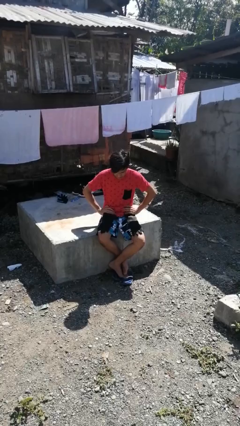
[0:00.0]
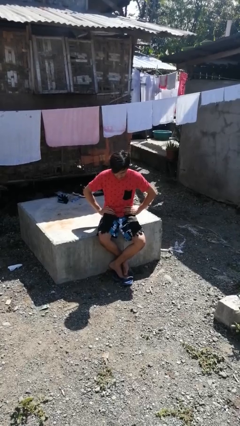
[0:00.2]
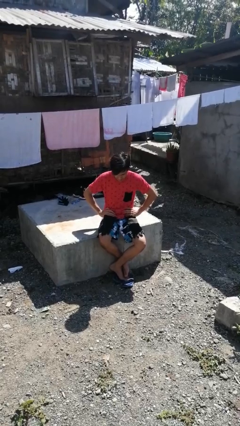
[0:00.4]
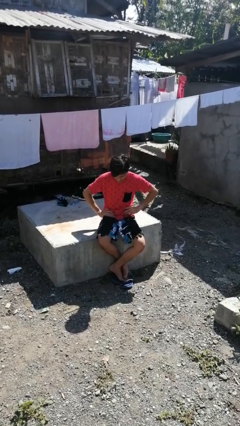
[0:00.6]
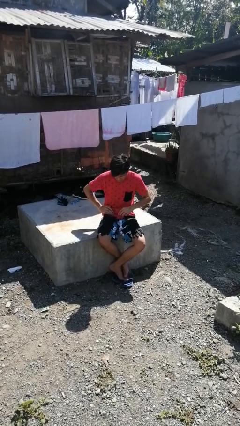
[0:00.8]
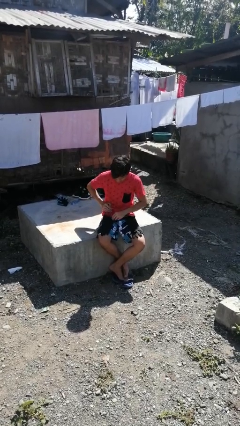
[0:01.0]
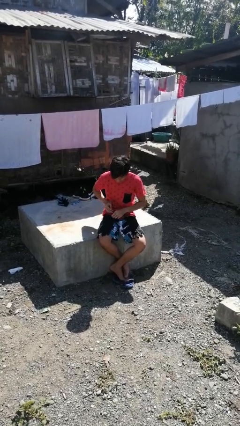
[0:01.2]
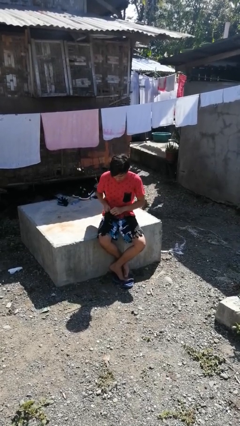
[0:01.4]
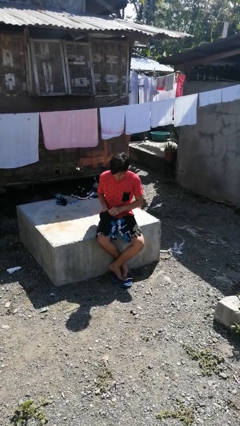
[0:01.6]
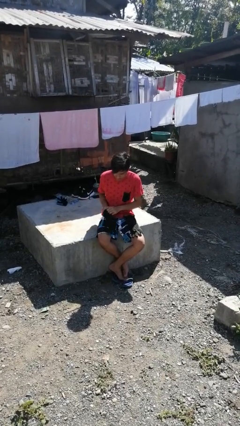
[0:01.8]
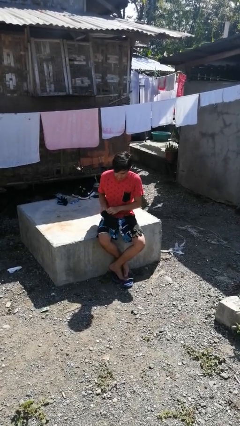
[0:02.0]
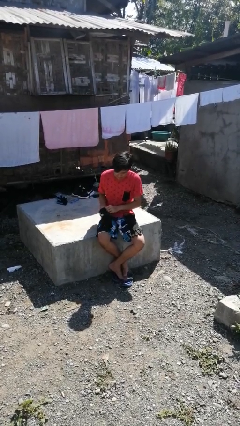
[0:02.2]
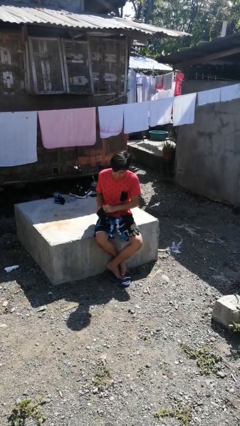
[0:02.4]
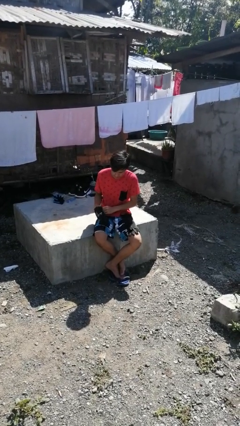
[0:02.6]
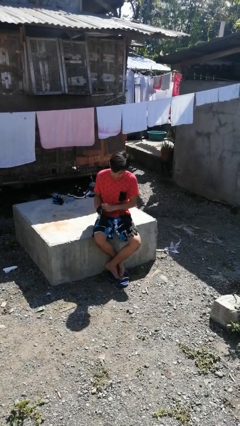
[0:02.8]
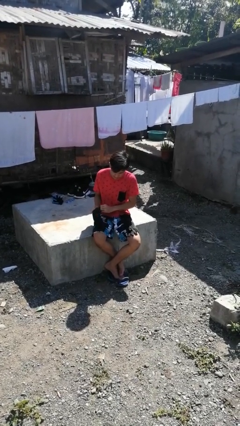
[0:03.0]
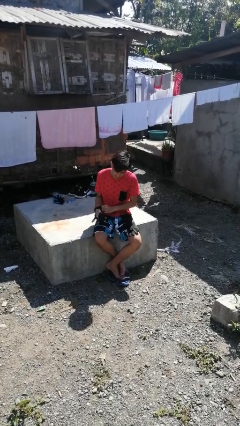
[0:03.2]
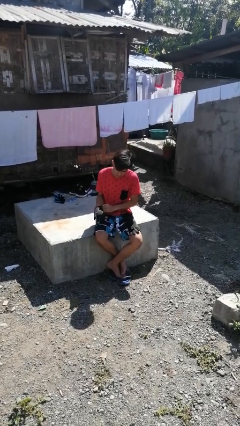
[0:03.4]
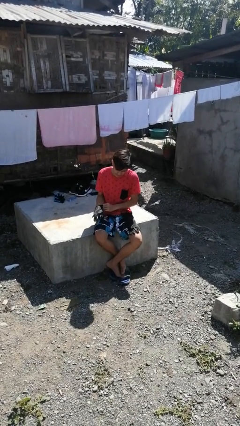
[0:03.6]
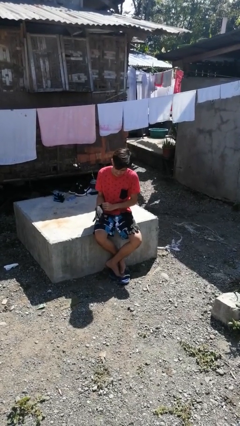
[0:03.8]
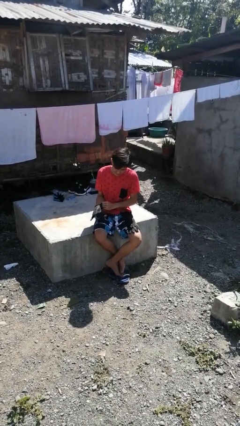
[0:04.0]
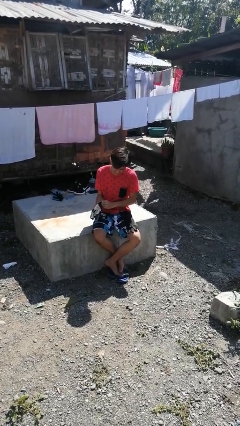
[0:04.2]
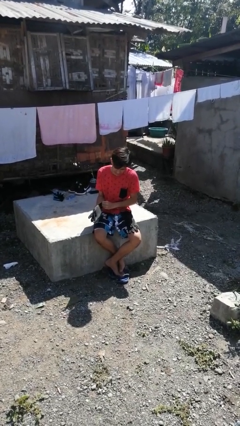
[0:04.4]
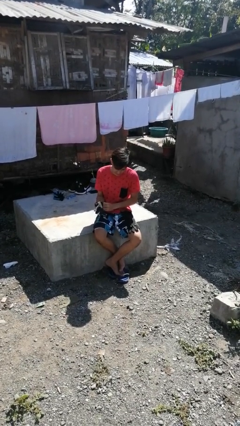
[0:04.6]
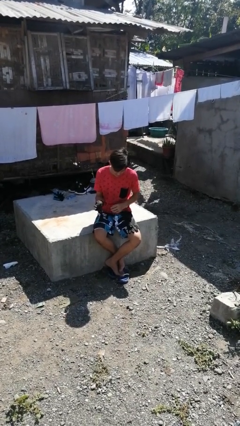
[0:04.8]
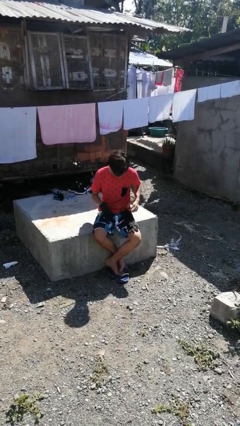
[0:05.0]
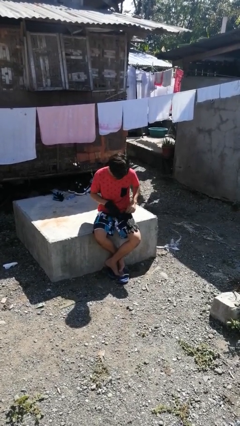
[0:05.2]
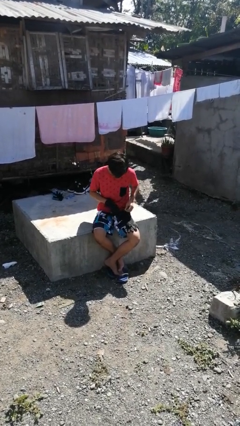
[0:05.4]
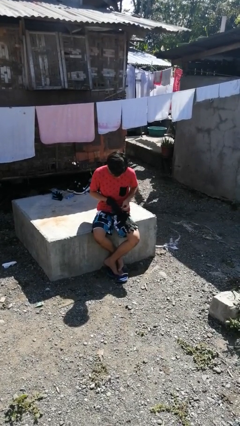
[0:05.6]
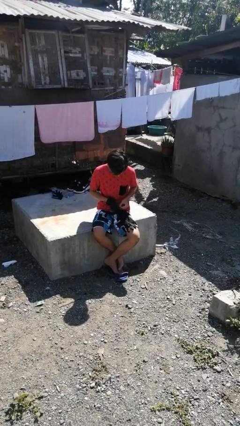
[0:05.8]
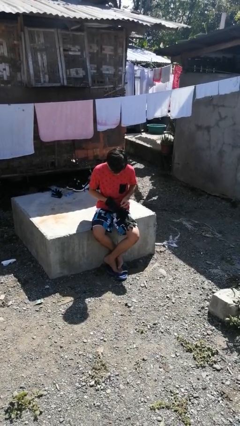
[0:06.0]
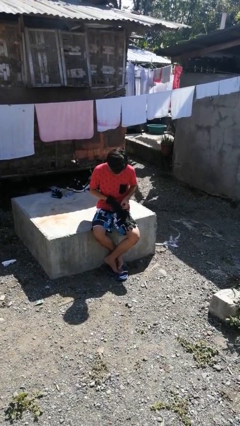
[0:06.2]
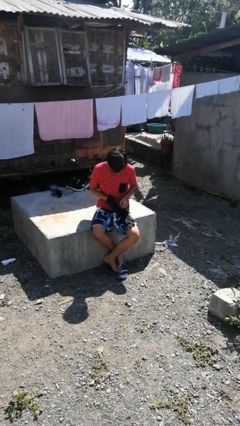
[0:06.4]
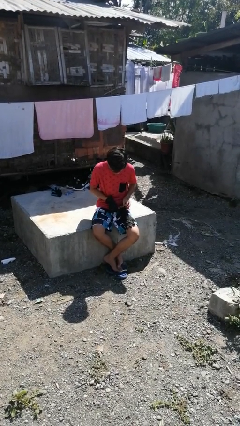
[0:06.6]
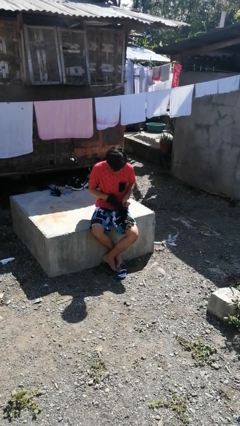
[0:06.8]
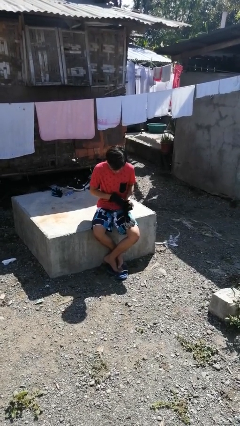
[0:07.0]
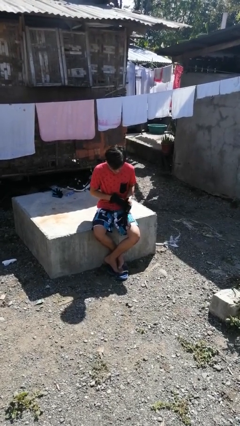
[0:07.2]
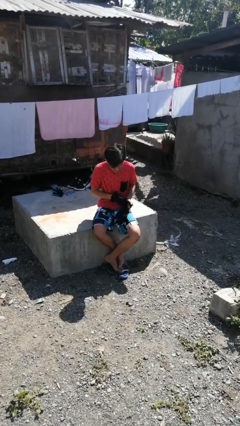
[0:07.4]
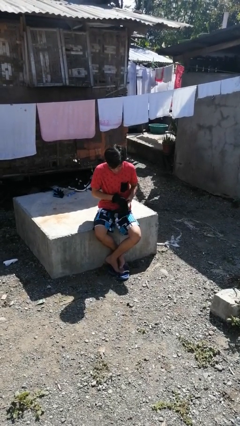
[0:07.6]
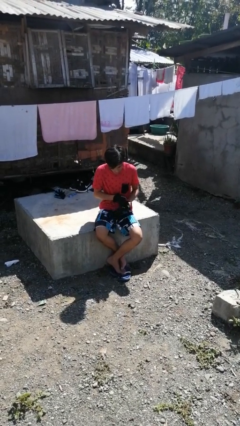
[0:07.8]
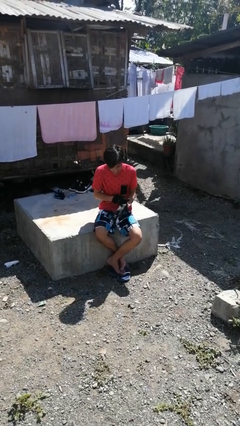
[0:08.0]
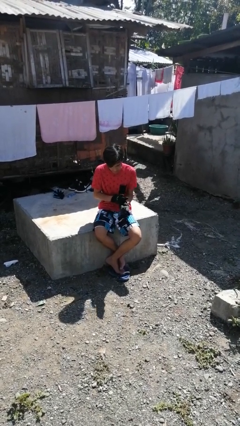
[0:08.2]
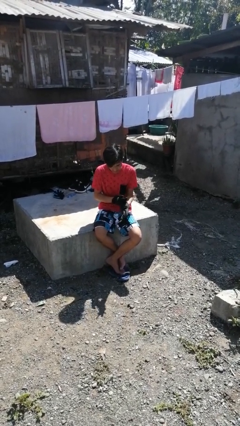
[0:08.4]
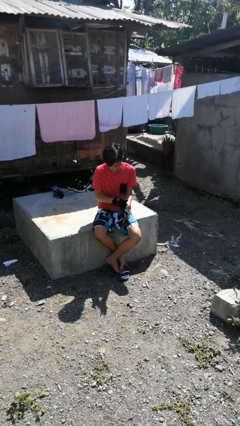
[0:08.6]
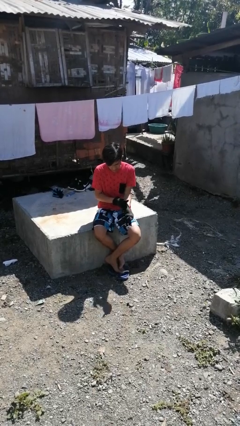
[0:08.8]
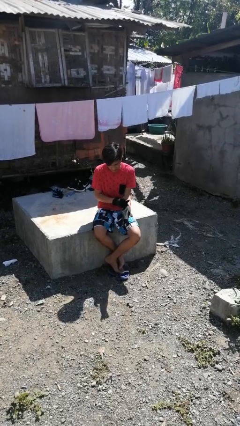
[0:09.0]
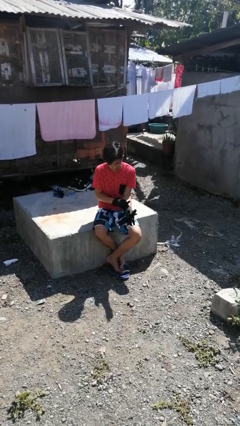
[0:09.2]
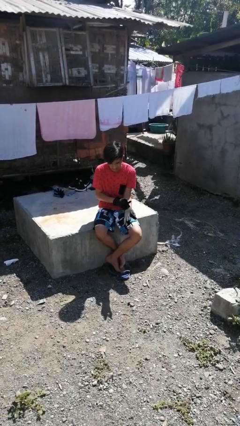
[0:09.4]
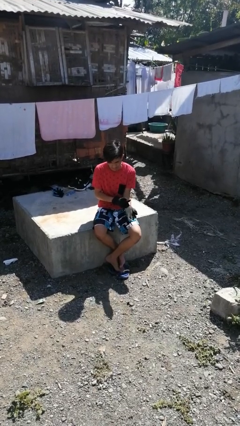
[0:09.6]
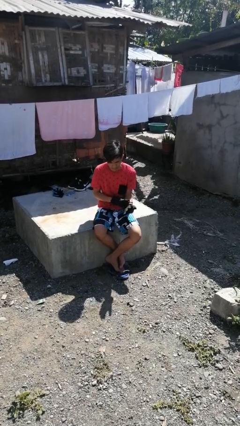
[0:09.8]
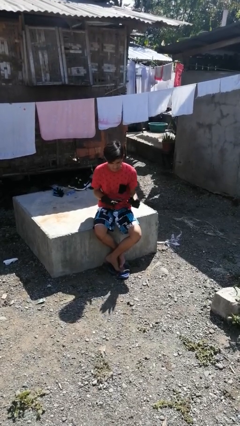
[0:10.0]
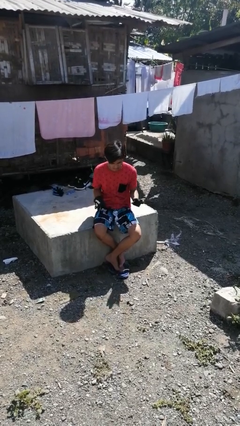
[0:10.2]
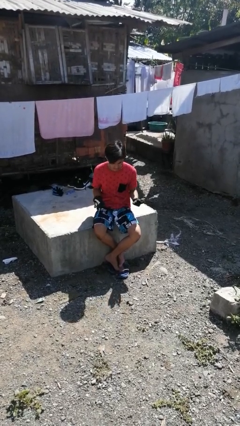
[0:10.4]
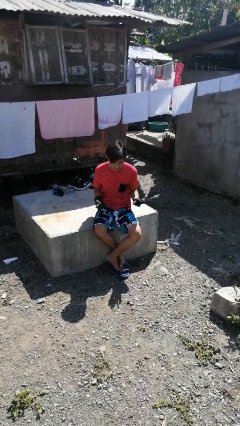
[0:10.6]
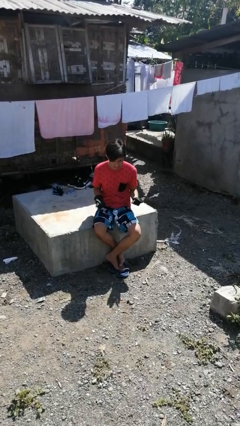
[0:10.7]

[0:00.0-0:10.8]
person puts on gloves

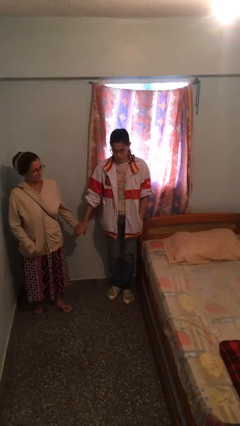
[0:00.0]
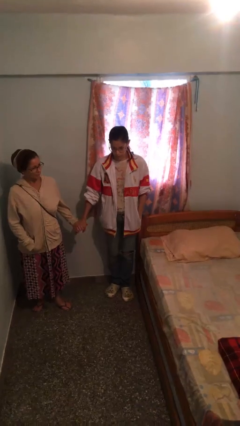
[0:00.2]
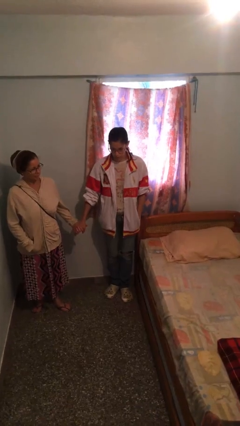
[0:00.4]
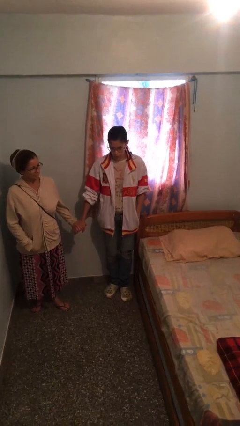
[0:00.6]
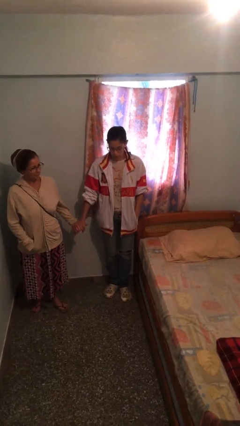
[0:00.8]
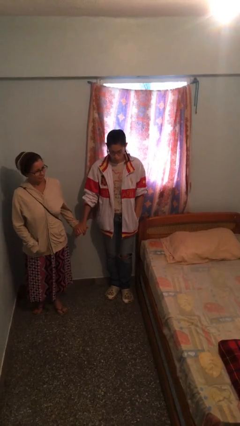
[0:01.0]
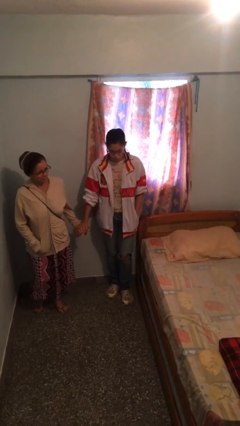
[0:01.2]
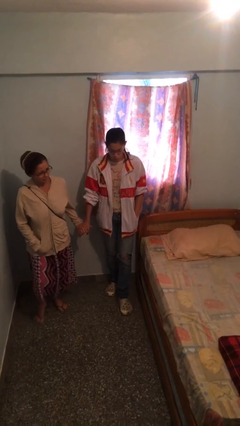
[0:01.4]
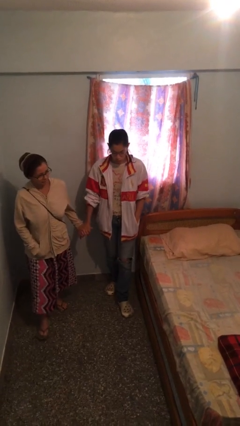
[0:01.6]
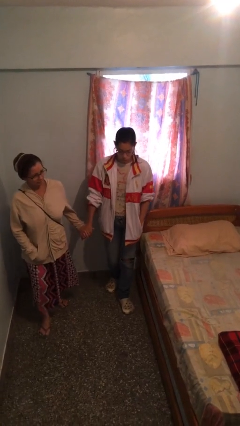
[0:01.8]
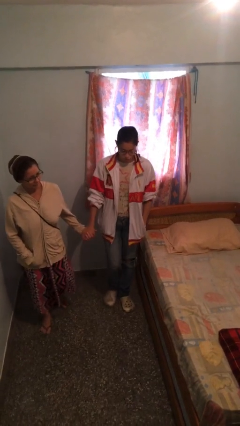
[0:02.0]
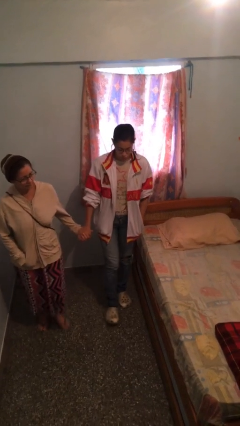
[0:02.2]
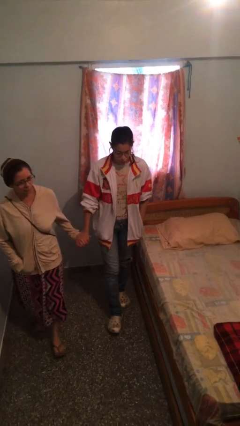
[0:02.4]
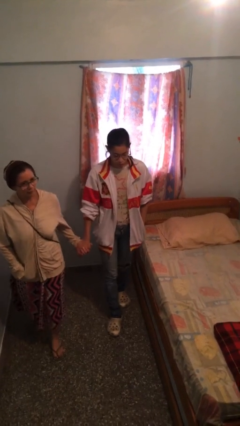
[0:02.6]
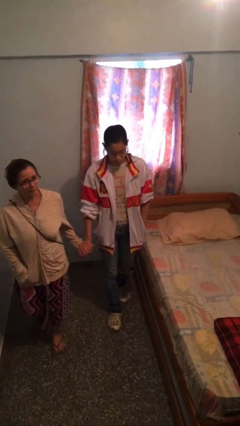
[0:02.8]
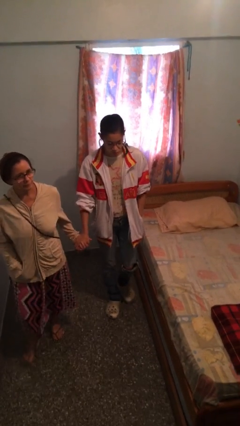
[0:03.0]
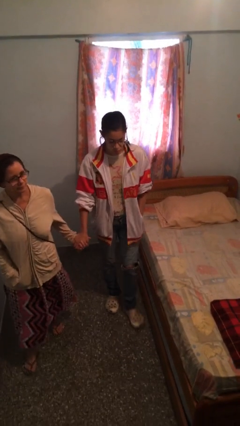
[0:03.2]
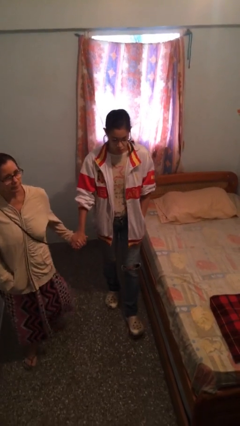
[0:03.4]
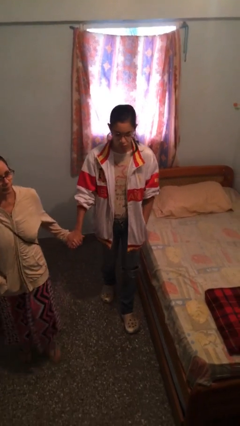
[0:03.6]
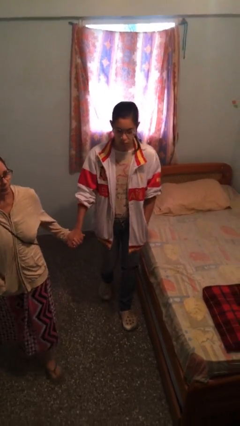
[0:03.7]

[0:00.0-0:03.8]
person holds hand

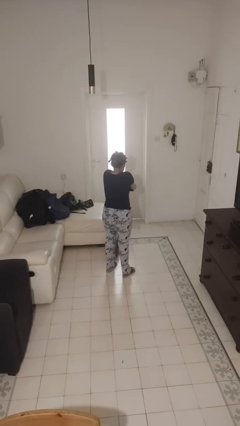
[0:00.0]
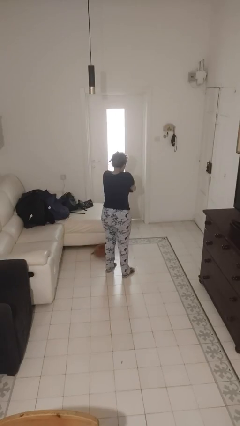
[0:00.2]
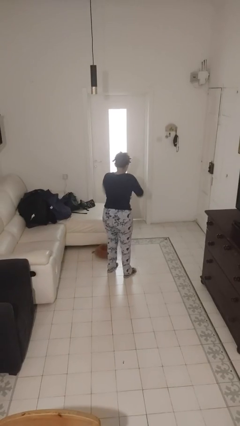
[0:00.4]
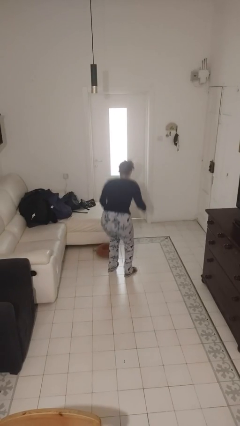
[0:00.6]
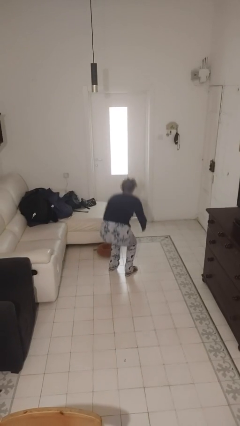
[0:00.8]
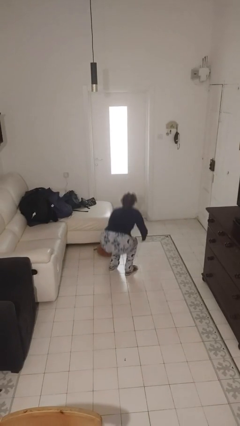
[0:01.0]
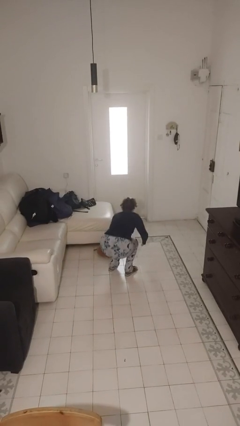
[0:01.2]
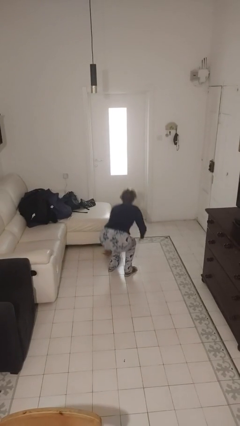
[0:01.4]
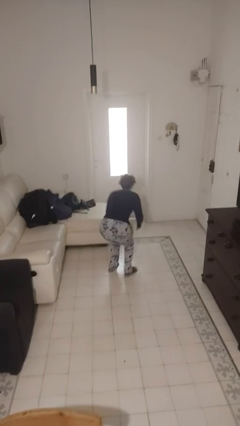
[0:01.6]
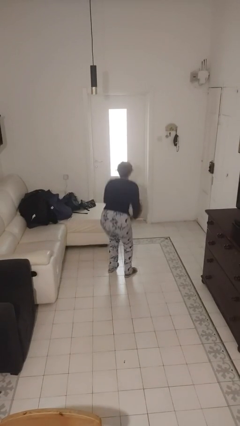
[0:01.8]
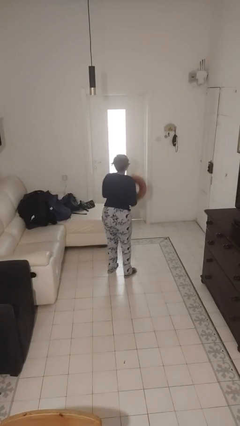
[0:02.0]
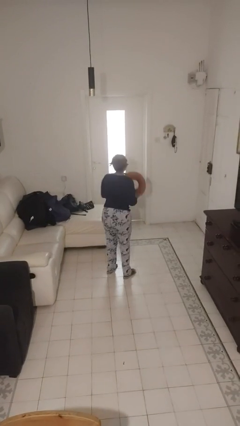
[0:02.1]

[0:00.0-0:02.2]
person picks up object from floor

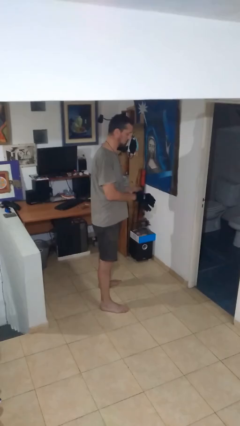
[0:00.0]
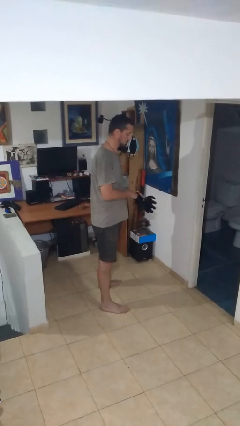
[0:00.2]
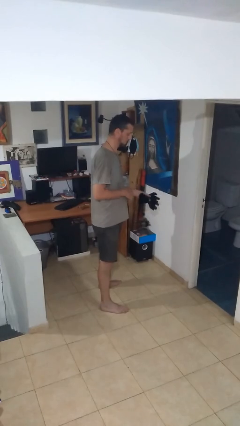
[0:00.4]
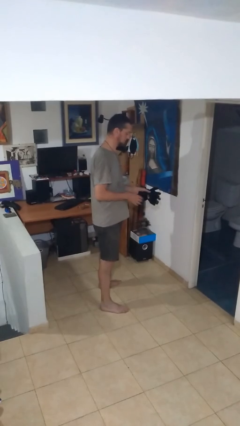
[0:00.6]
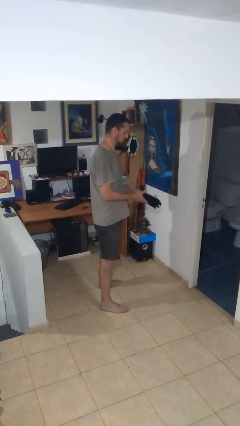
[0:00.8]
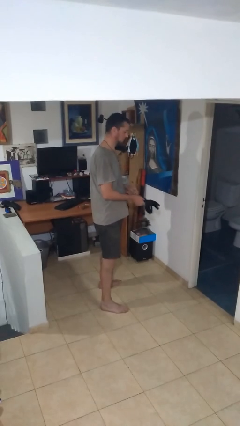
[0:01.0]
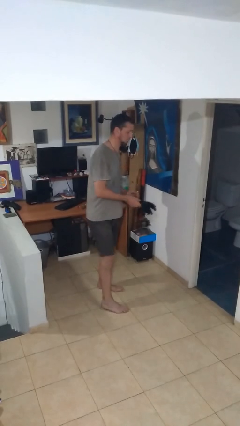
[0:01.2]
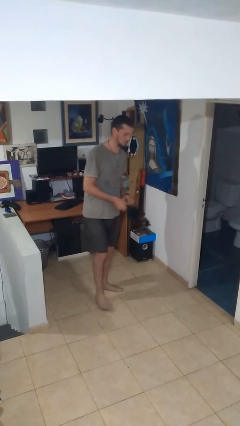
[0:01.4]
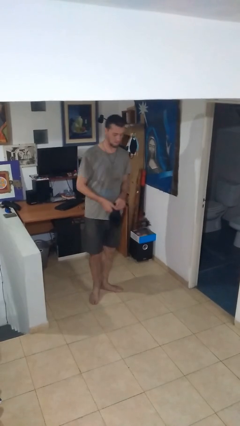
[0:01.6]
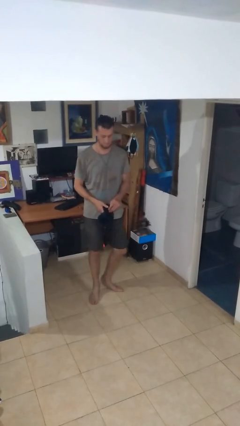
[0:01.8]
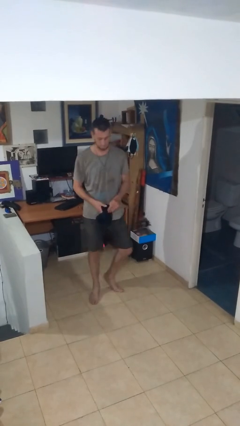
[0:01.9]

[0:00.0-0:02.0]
person takes off gloves
